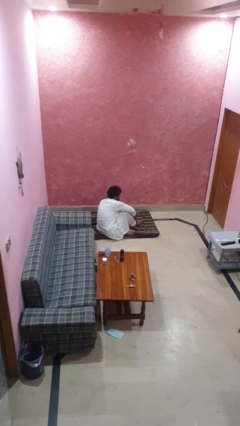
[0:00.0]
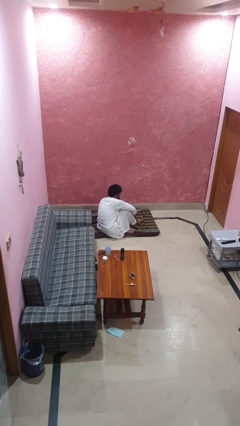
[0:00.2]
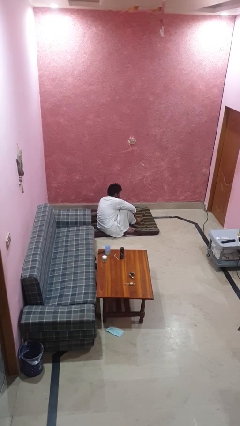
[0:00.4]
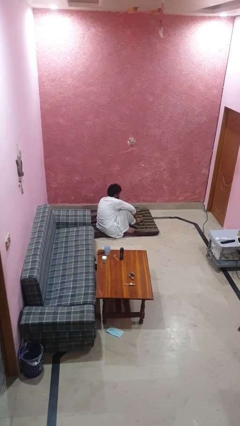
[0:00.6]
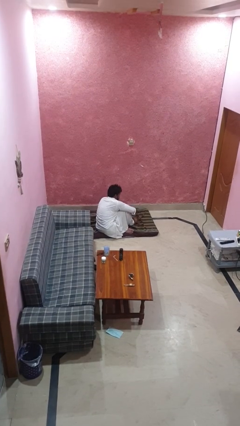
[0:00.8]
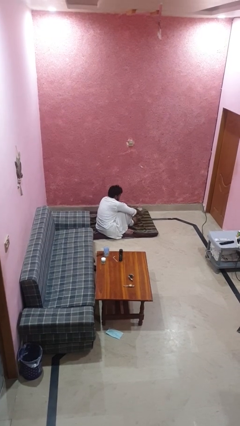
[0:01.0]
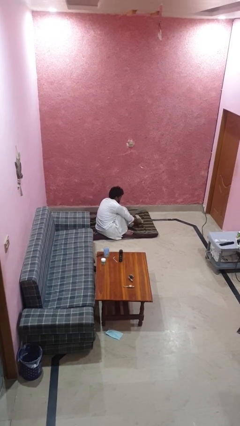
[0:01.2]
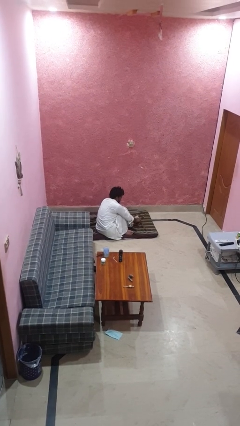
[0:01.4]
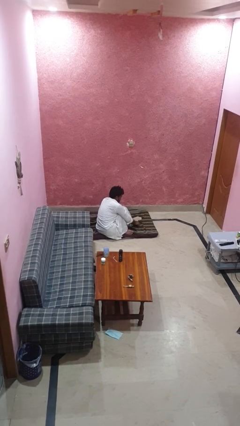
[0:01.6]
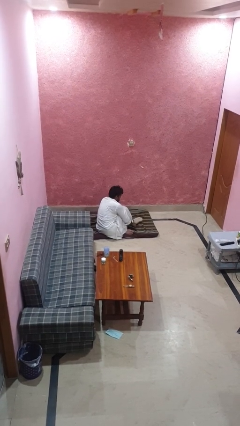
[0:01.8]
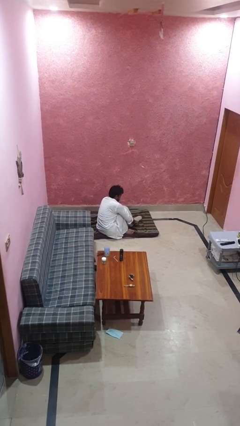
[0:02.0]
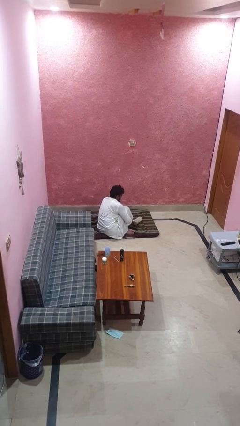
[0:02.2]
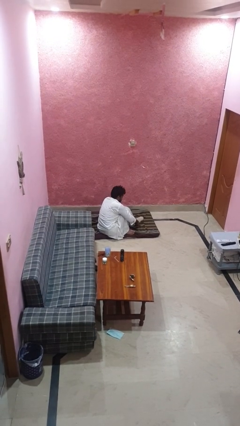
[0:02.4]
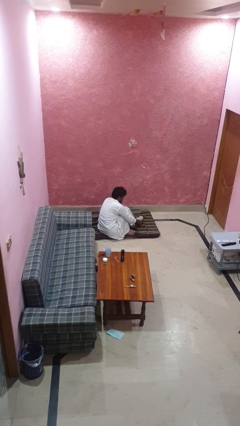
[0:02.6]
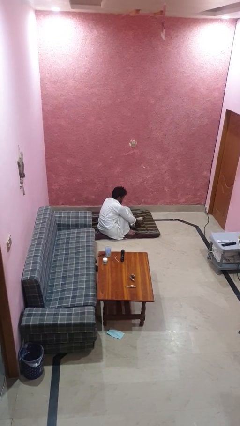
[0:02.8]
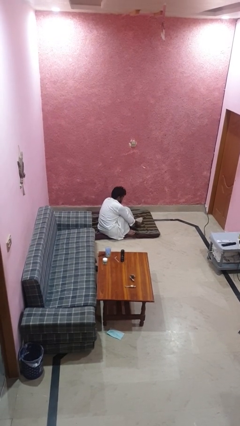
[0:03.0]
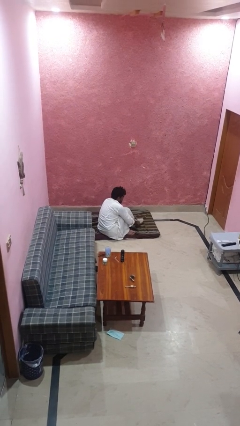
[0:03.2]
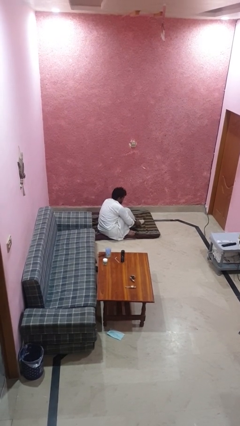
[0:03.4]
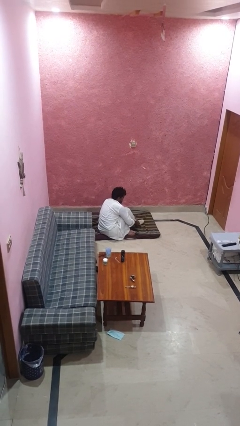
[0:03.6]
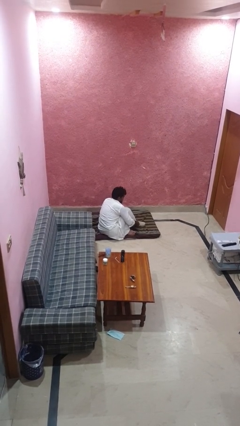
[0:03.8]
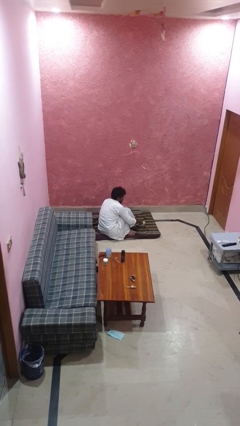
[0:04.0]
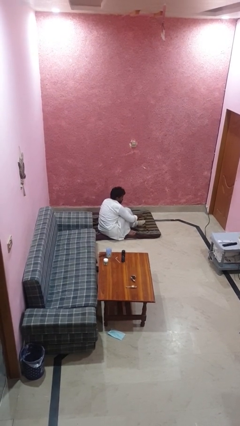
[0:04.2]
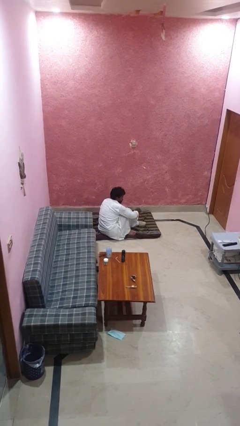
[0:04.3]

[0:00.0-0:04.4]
person puts on socks

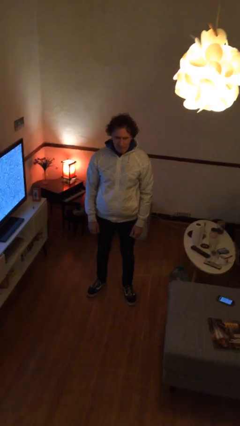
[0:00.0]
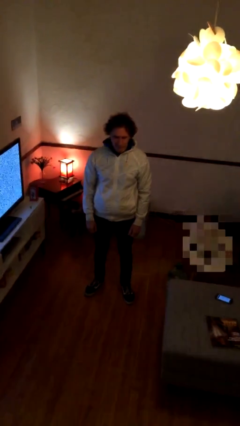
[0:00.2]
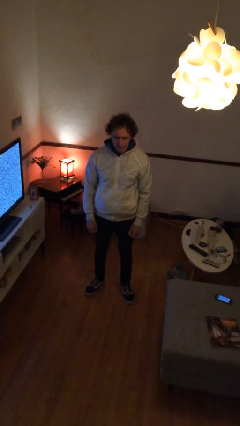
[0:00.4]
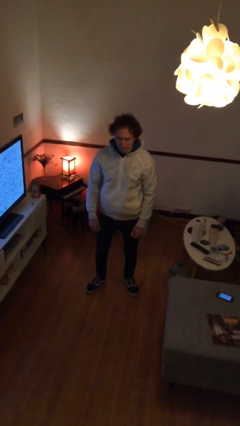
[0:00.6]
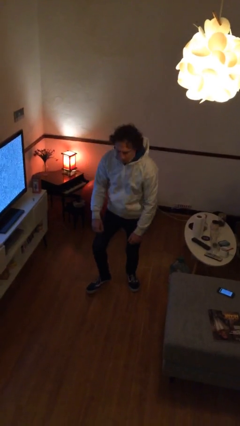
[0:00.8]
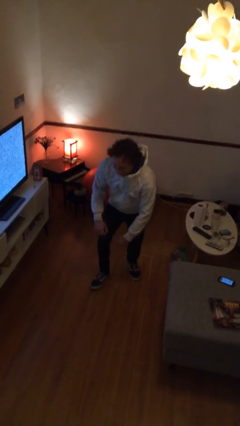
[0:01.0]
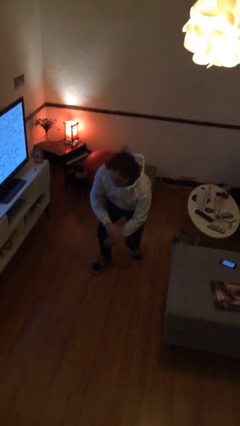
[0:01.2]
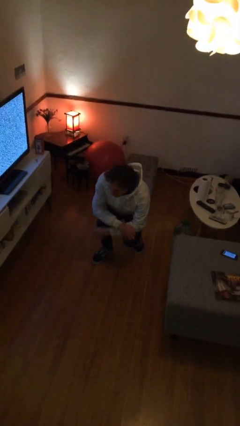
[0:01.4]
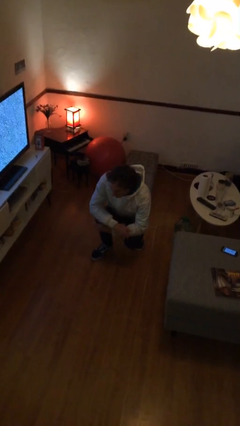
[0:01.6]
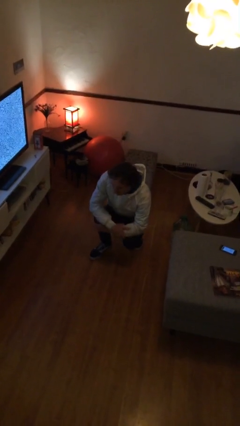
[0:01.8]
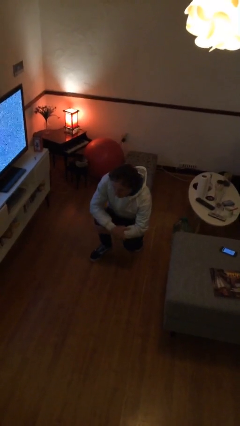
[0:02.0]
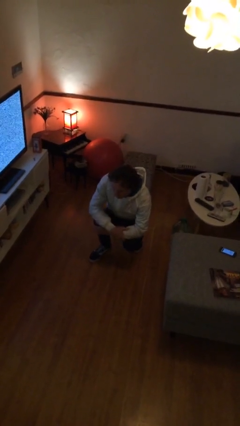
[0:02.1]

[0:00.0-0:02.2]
person squats

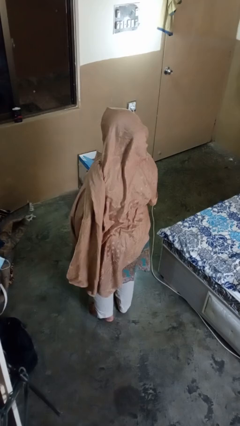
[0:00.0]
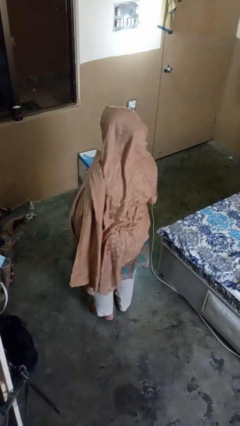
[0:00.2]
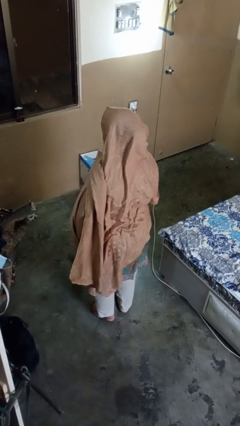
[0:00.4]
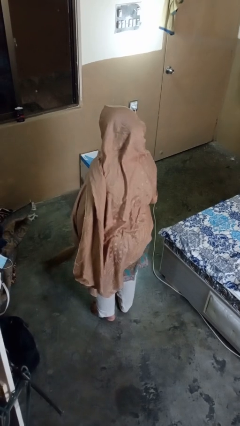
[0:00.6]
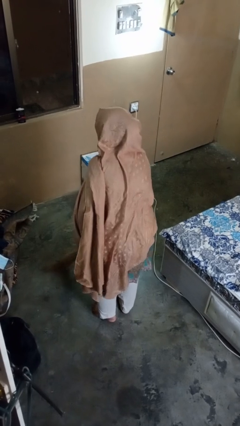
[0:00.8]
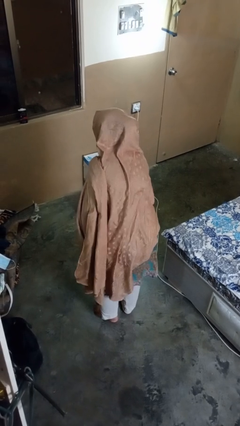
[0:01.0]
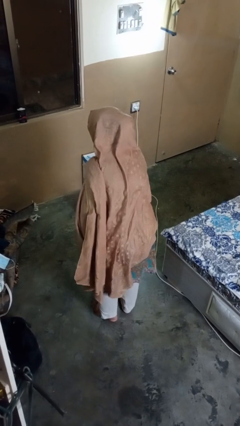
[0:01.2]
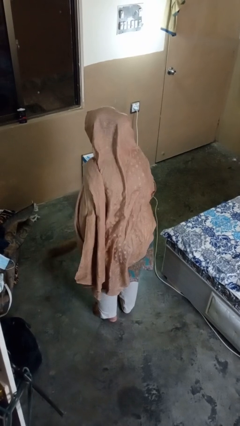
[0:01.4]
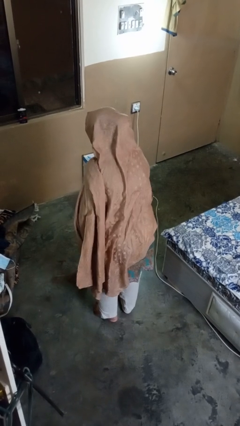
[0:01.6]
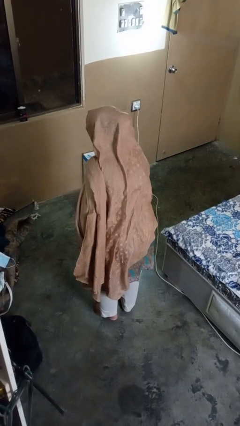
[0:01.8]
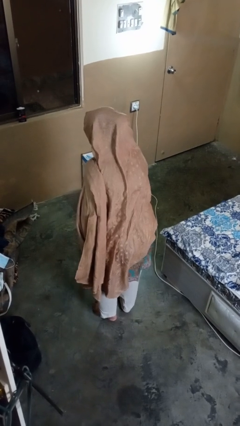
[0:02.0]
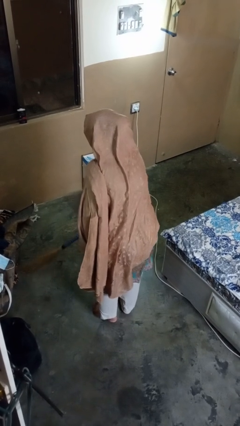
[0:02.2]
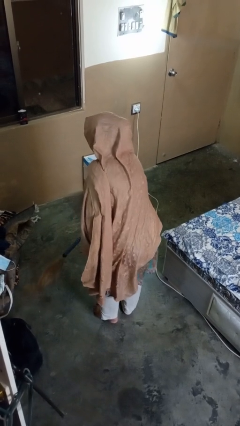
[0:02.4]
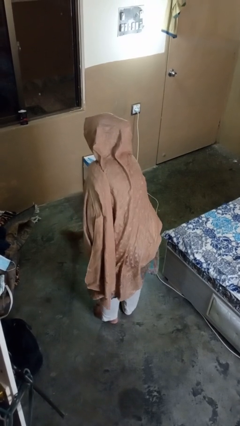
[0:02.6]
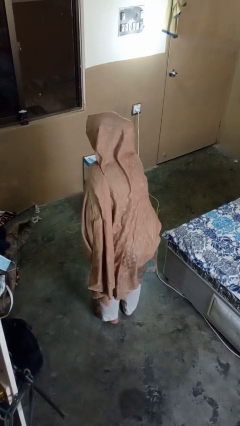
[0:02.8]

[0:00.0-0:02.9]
person sweeps floor

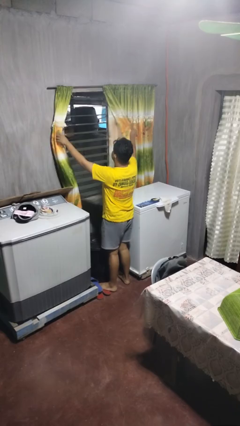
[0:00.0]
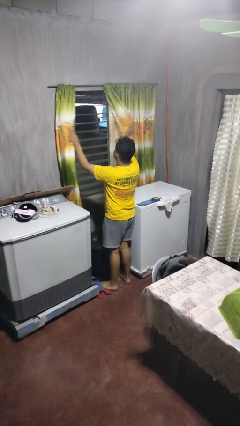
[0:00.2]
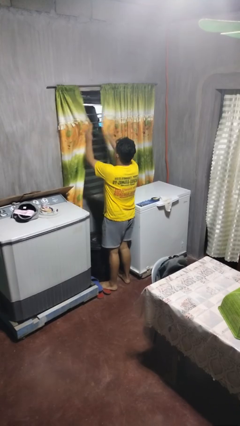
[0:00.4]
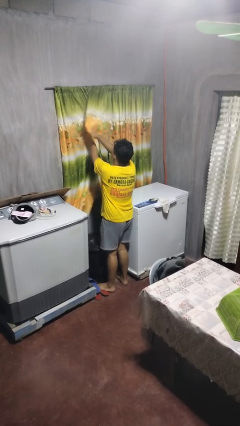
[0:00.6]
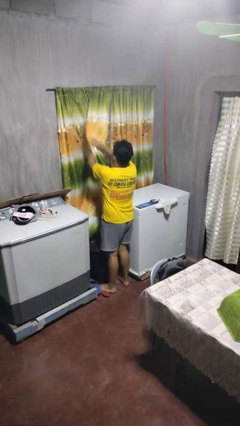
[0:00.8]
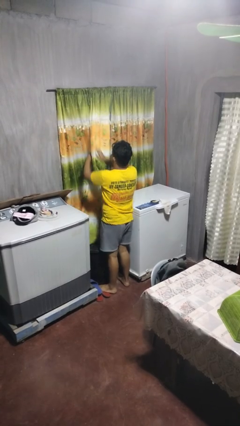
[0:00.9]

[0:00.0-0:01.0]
person closes curtains

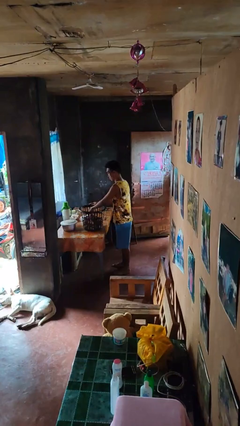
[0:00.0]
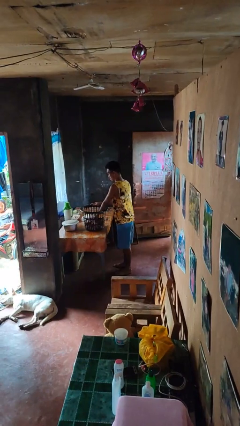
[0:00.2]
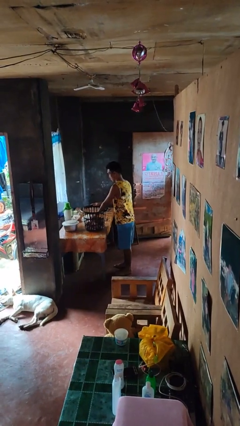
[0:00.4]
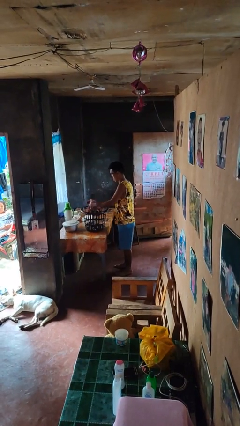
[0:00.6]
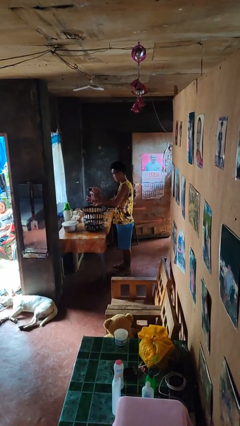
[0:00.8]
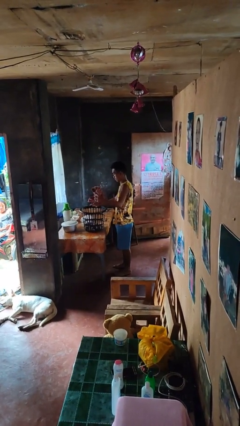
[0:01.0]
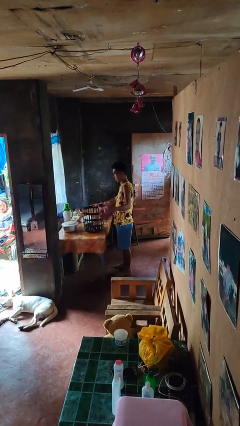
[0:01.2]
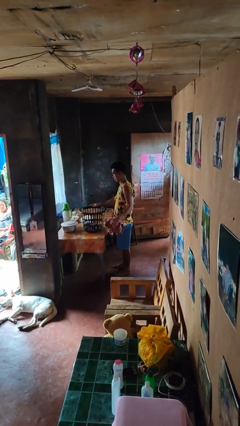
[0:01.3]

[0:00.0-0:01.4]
person takes object from basket

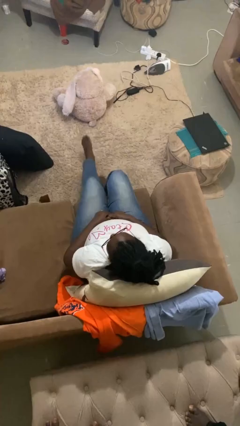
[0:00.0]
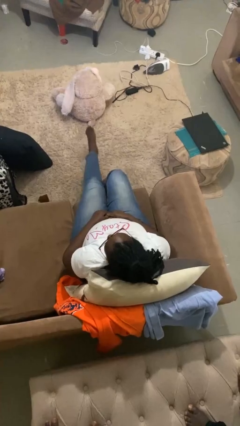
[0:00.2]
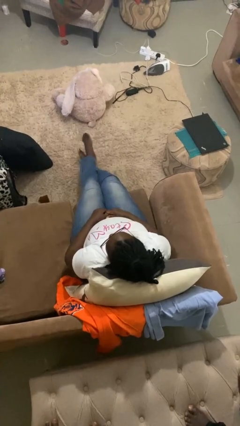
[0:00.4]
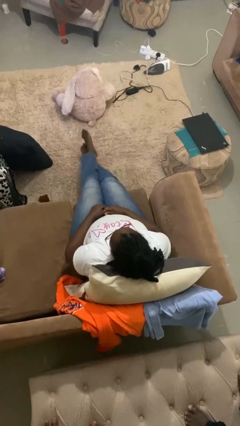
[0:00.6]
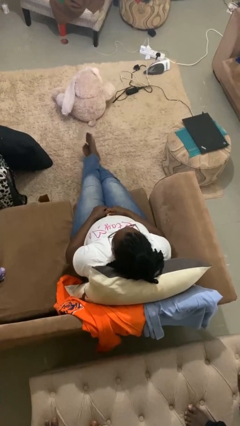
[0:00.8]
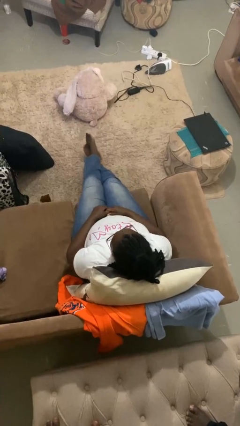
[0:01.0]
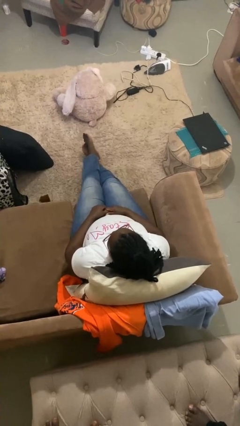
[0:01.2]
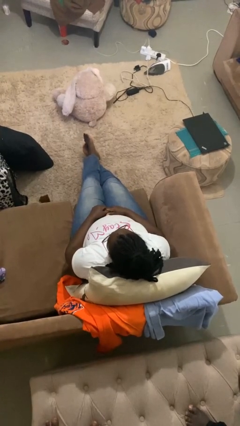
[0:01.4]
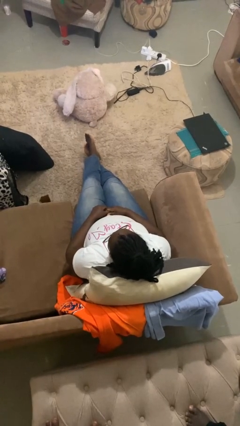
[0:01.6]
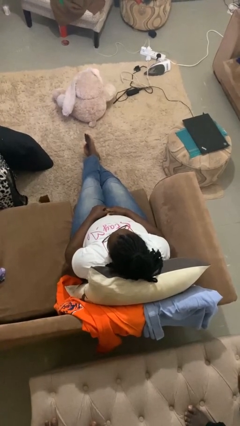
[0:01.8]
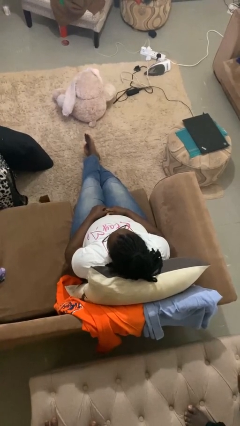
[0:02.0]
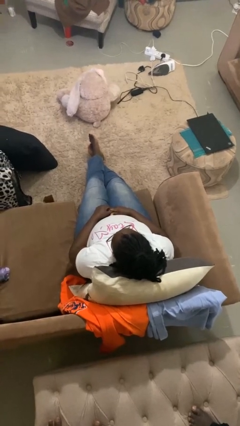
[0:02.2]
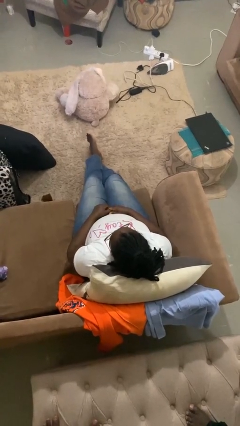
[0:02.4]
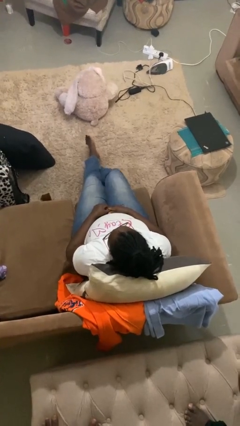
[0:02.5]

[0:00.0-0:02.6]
person crosses legs

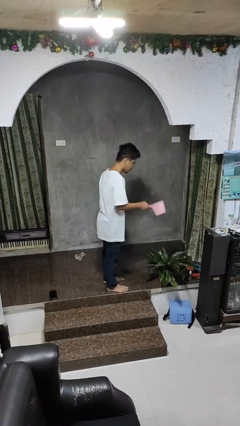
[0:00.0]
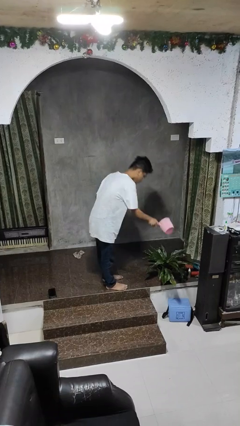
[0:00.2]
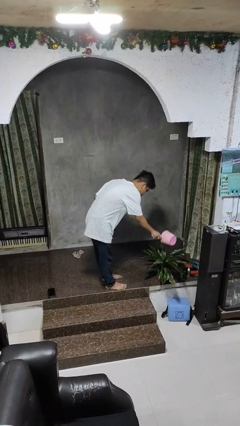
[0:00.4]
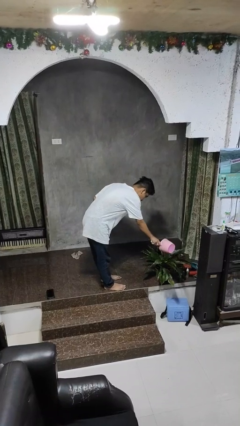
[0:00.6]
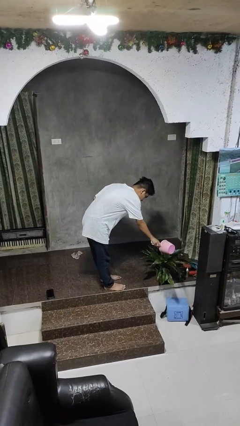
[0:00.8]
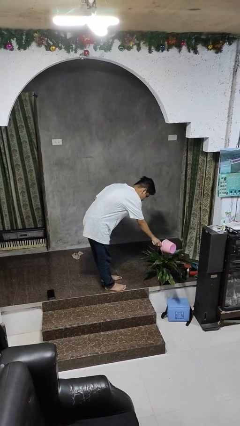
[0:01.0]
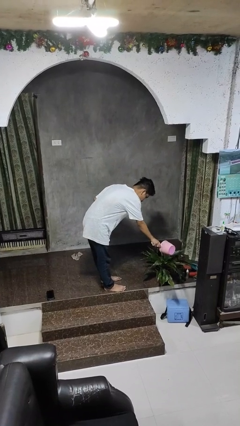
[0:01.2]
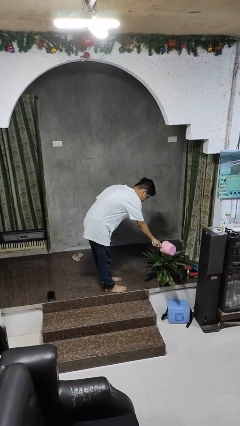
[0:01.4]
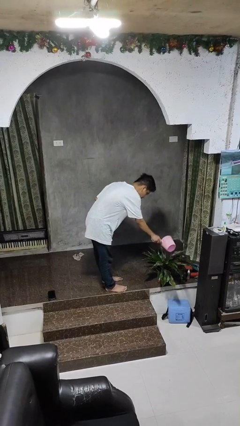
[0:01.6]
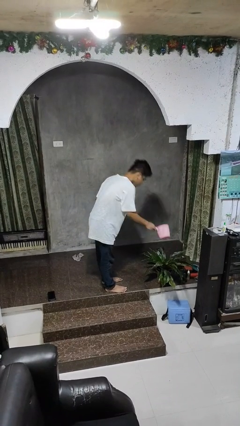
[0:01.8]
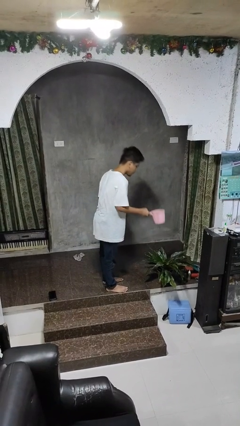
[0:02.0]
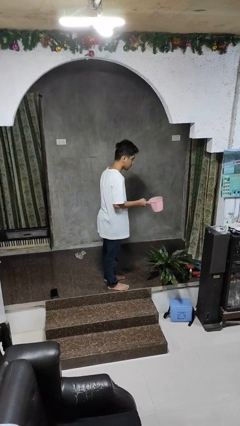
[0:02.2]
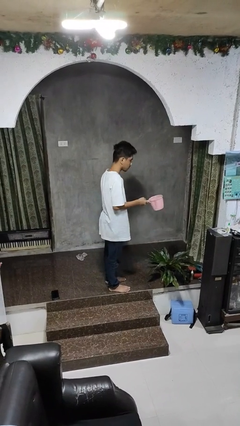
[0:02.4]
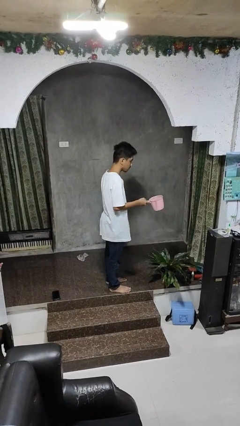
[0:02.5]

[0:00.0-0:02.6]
person waters houseplant

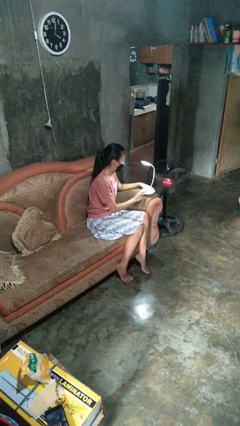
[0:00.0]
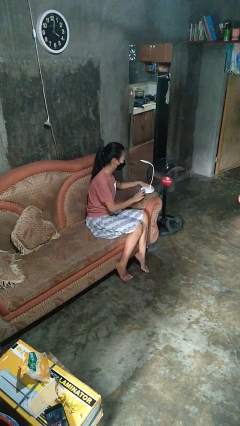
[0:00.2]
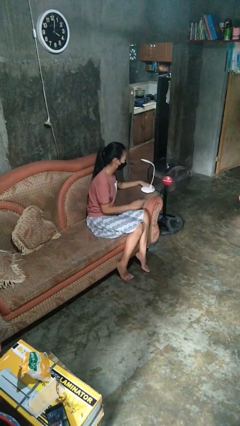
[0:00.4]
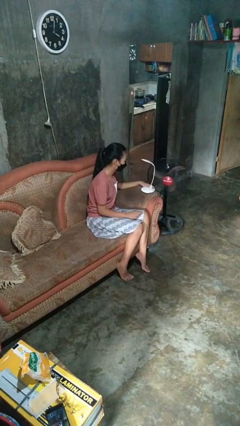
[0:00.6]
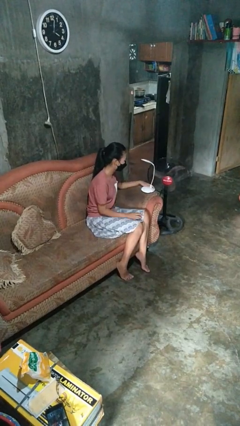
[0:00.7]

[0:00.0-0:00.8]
person turns off lamp
